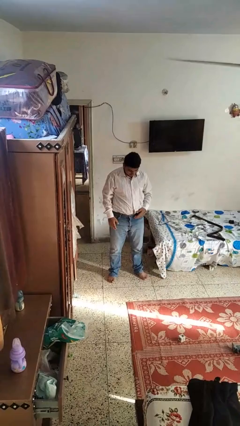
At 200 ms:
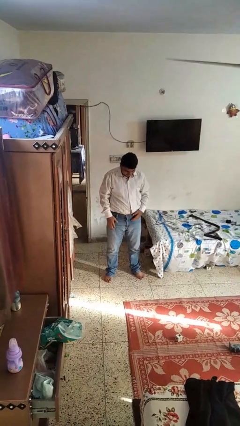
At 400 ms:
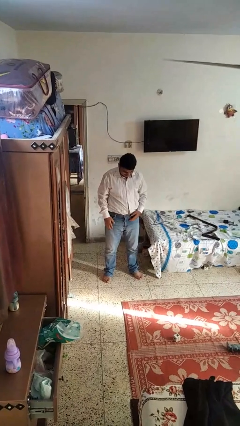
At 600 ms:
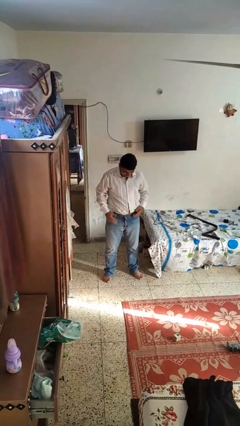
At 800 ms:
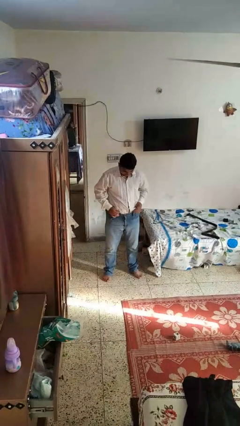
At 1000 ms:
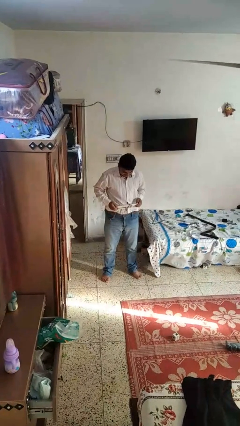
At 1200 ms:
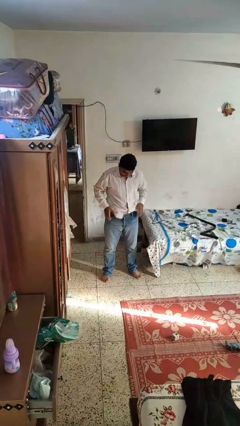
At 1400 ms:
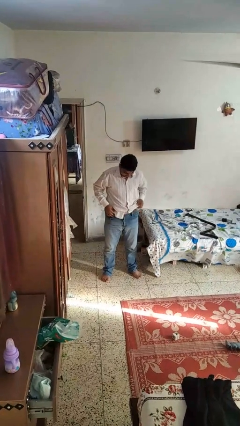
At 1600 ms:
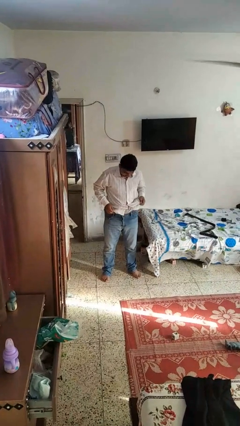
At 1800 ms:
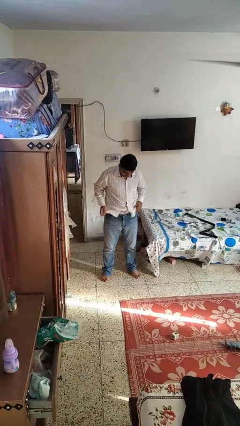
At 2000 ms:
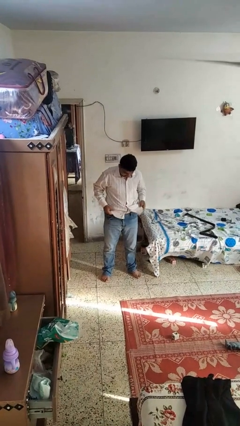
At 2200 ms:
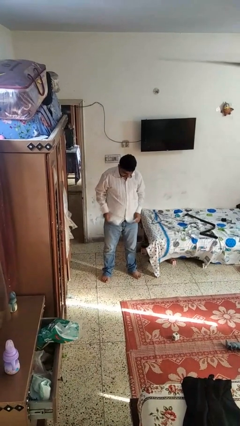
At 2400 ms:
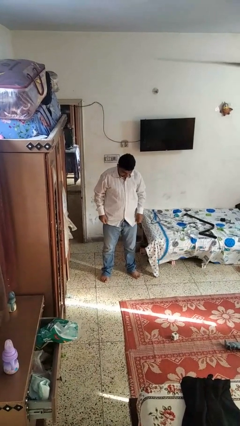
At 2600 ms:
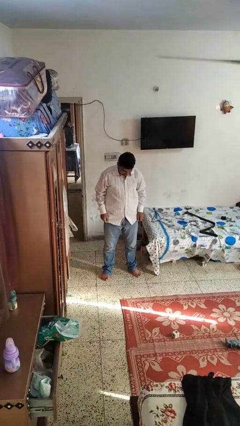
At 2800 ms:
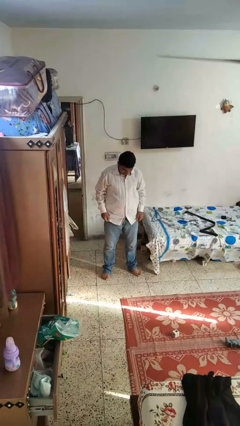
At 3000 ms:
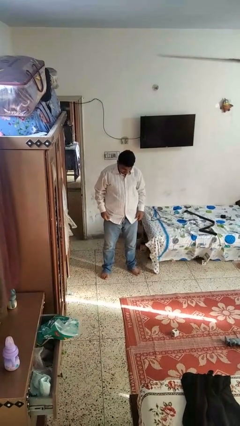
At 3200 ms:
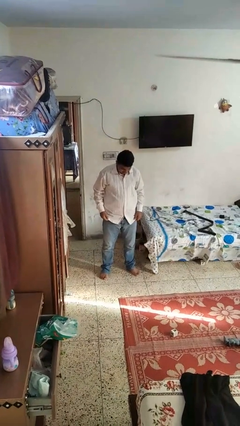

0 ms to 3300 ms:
person untucks shirt

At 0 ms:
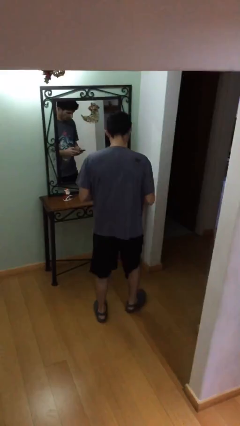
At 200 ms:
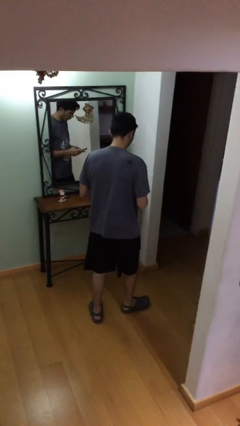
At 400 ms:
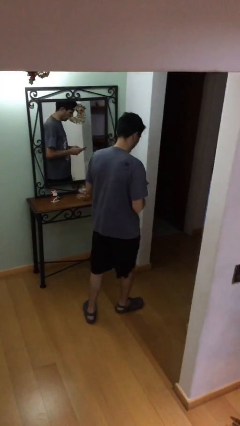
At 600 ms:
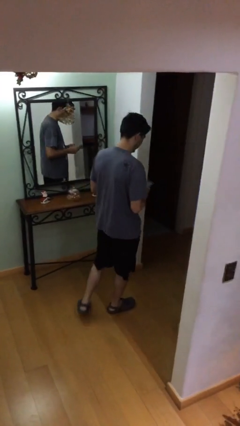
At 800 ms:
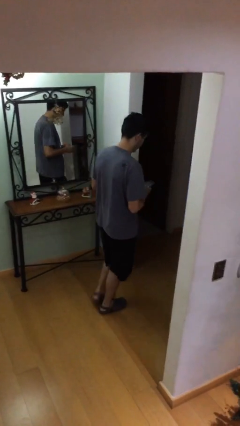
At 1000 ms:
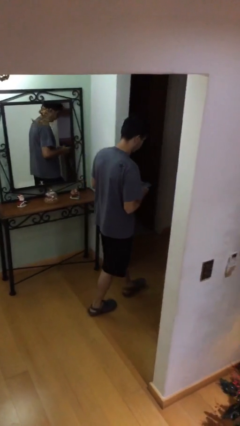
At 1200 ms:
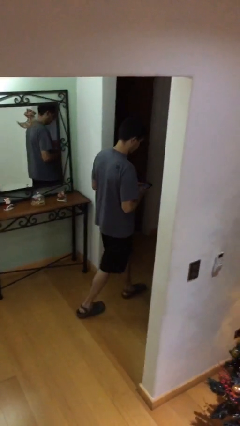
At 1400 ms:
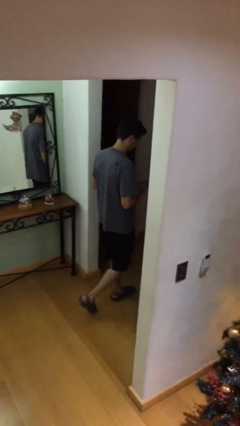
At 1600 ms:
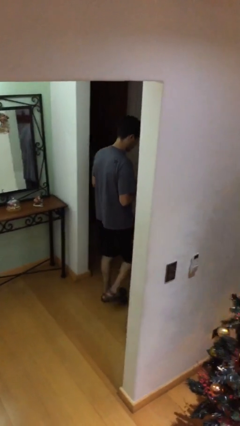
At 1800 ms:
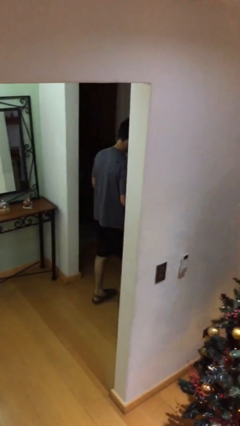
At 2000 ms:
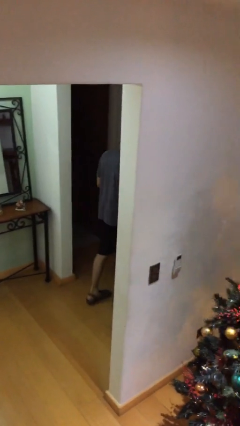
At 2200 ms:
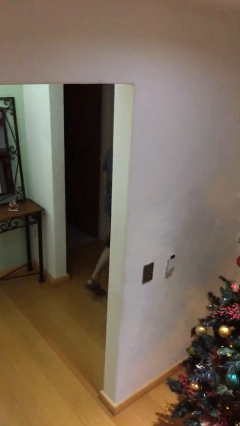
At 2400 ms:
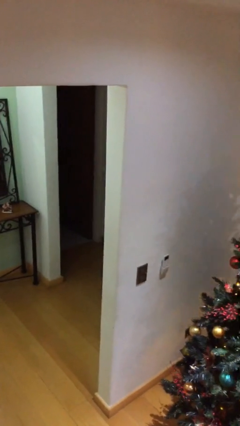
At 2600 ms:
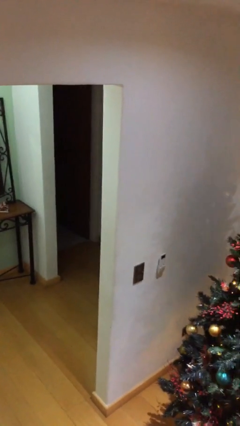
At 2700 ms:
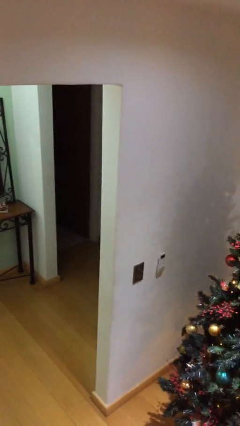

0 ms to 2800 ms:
person exits scene through structure

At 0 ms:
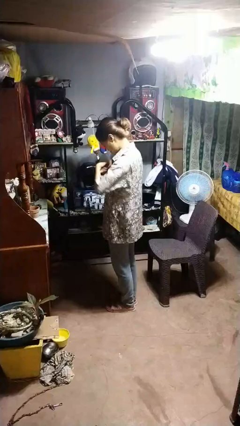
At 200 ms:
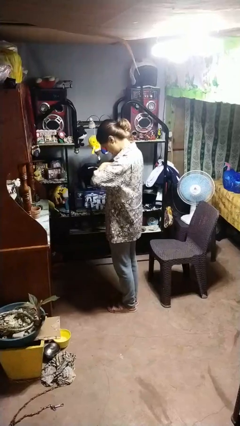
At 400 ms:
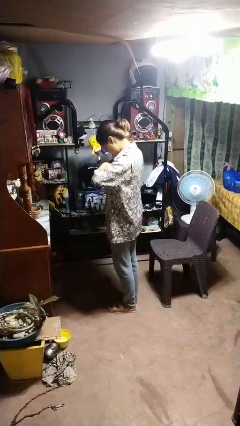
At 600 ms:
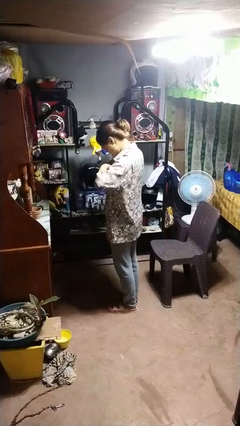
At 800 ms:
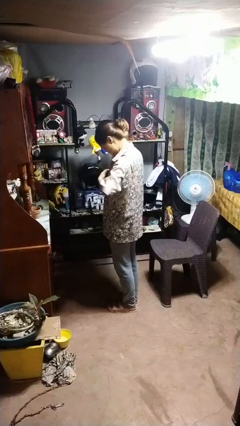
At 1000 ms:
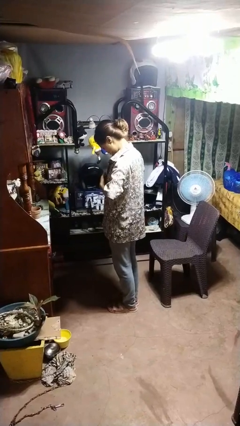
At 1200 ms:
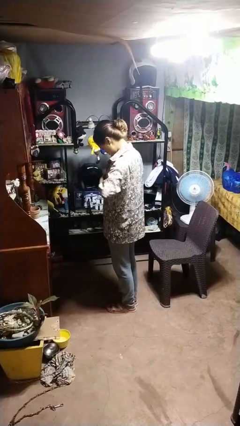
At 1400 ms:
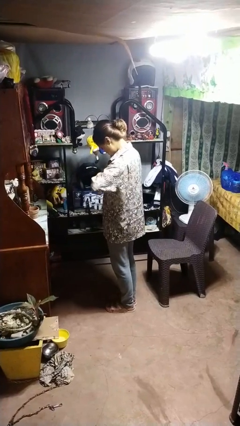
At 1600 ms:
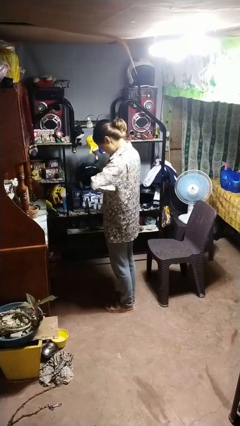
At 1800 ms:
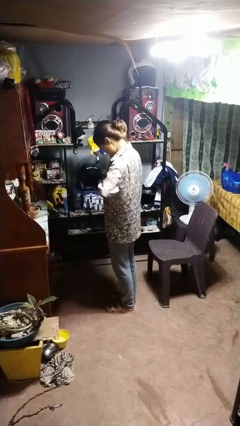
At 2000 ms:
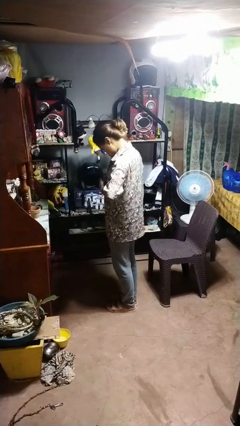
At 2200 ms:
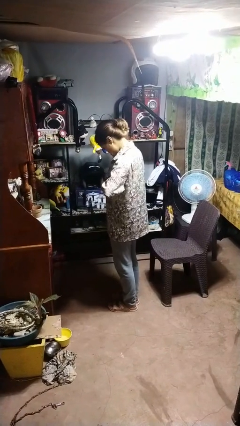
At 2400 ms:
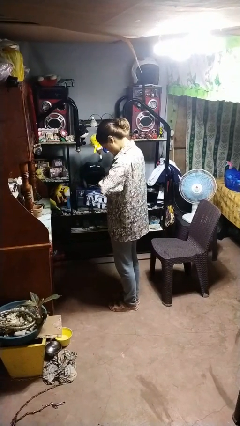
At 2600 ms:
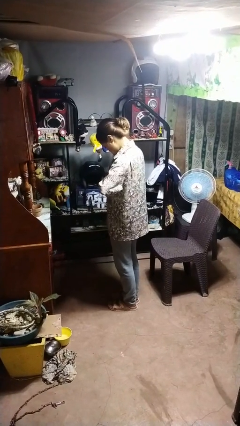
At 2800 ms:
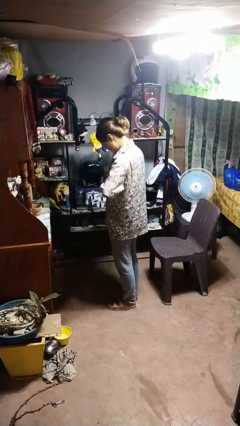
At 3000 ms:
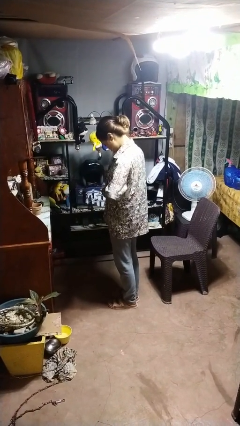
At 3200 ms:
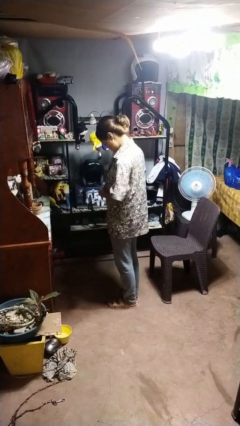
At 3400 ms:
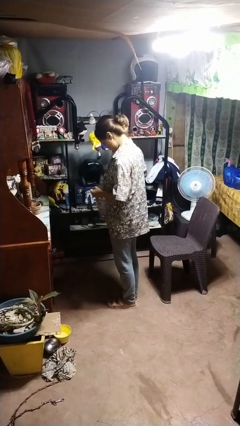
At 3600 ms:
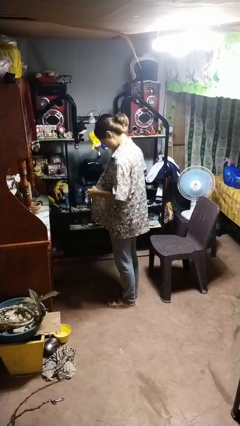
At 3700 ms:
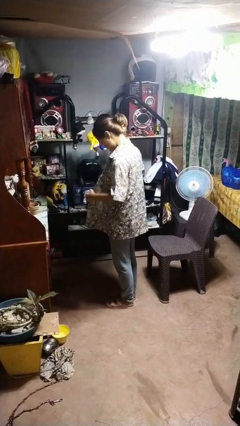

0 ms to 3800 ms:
person unbuttons shirt

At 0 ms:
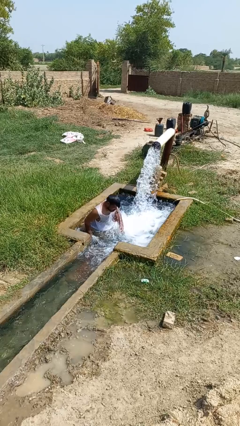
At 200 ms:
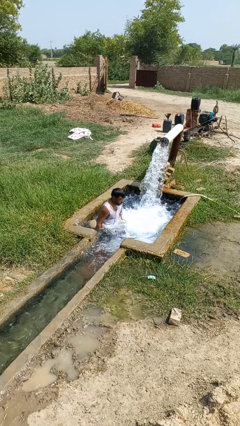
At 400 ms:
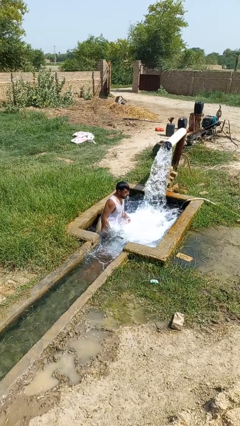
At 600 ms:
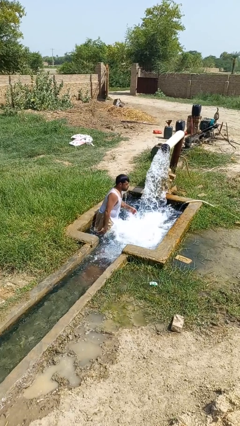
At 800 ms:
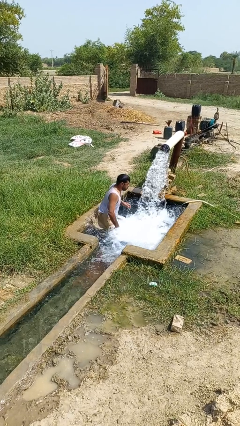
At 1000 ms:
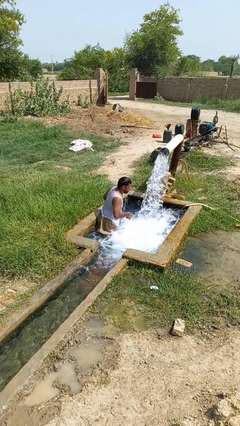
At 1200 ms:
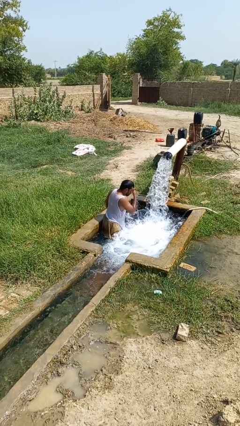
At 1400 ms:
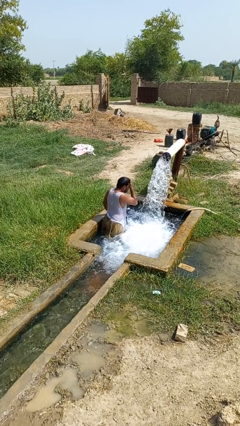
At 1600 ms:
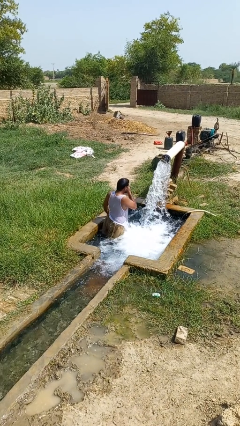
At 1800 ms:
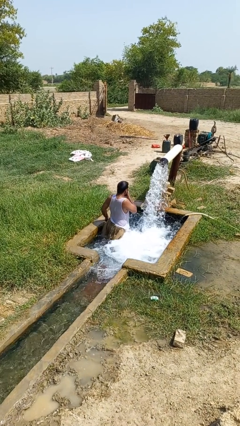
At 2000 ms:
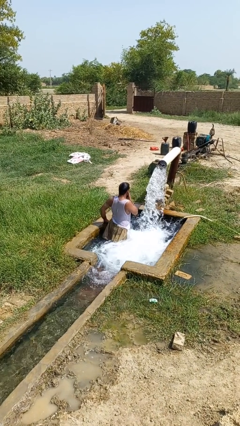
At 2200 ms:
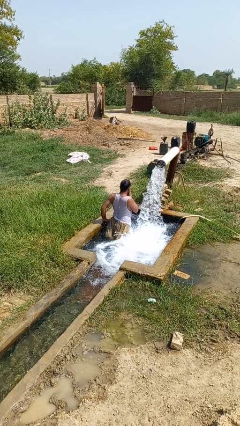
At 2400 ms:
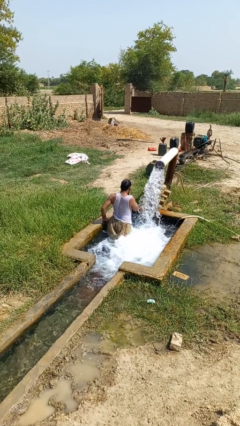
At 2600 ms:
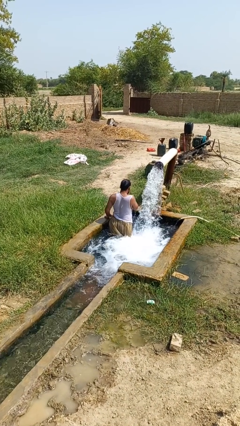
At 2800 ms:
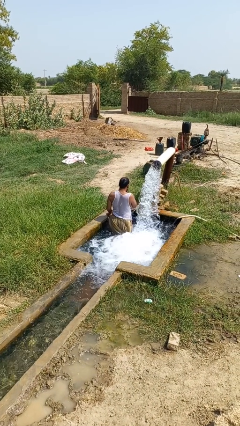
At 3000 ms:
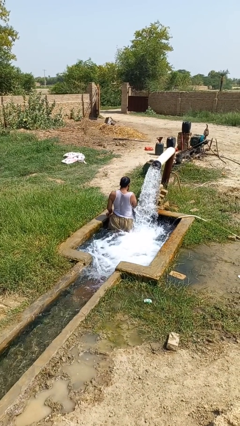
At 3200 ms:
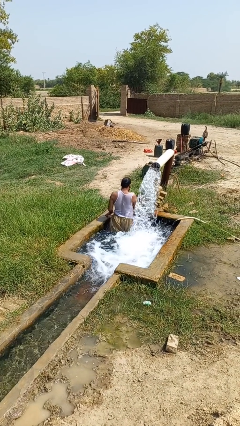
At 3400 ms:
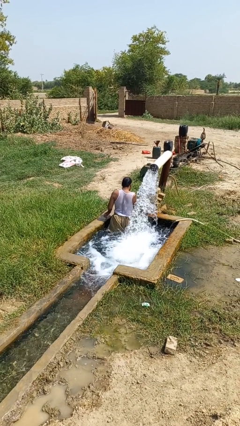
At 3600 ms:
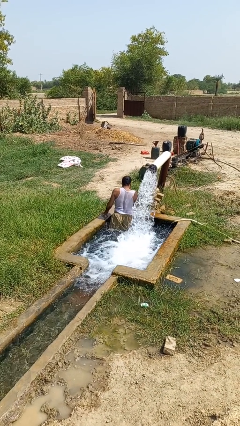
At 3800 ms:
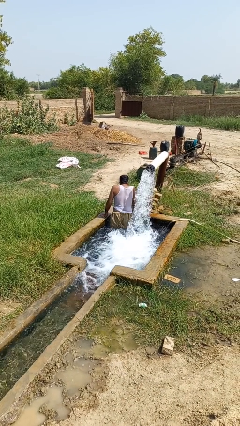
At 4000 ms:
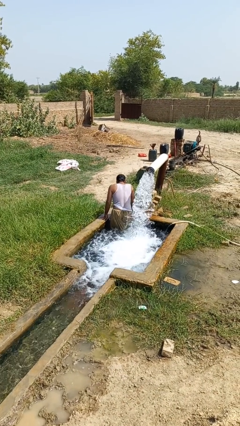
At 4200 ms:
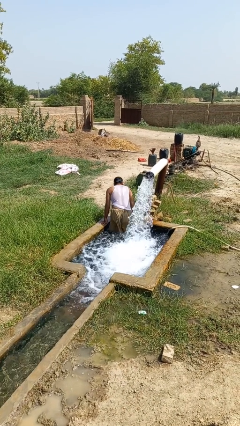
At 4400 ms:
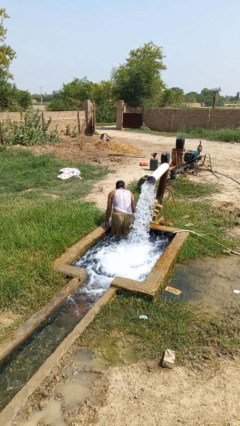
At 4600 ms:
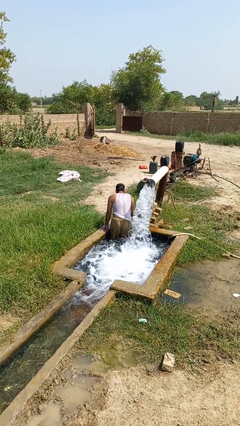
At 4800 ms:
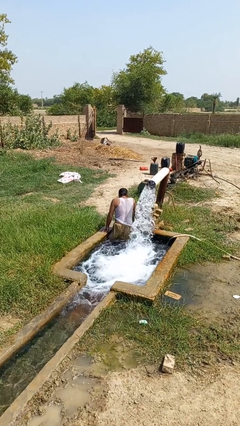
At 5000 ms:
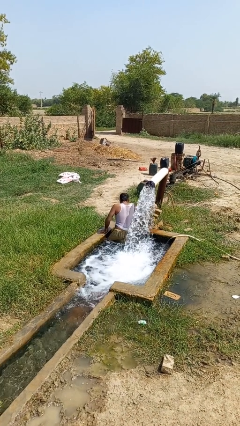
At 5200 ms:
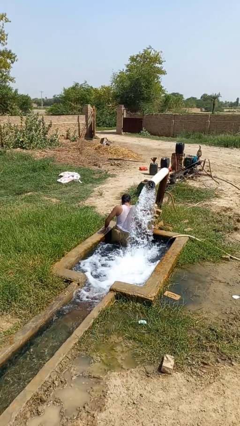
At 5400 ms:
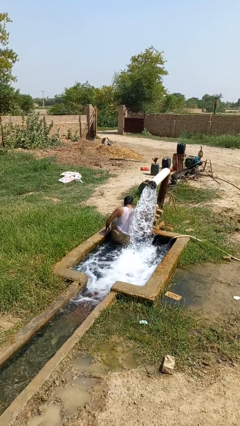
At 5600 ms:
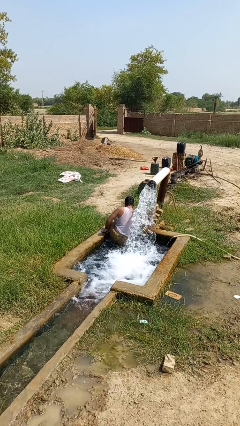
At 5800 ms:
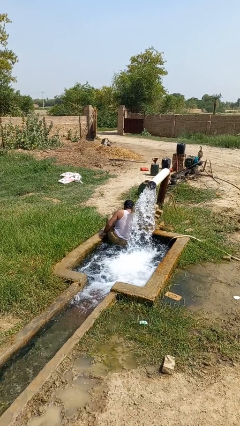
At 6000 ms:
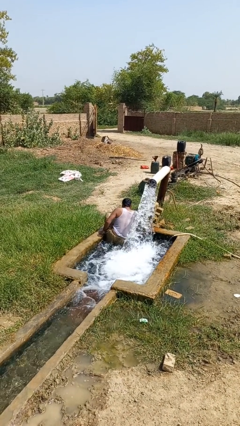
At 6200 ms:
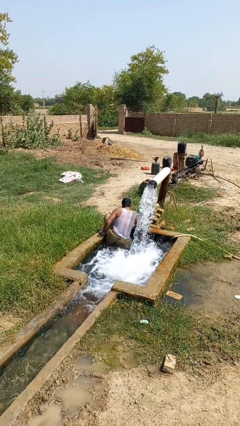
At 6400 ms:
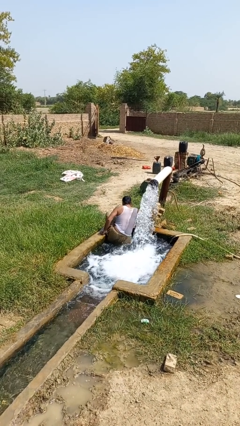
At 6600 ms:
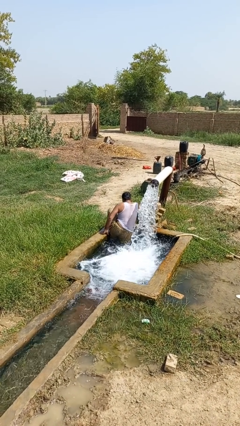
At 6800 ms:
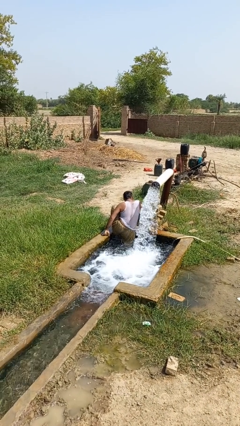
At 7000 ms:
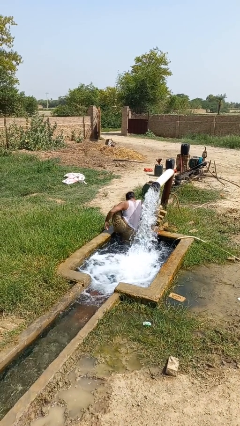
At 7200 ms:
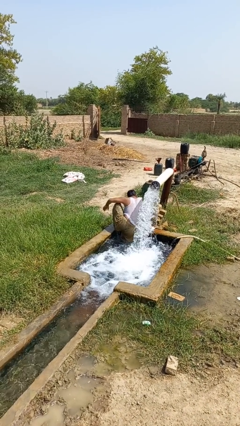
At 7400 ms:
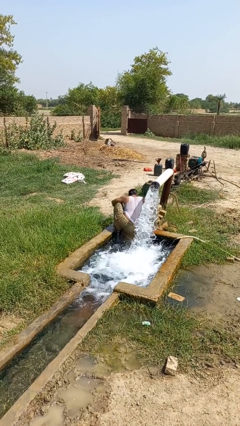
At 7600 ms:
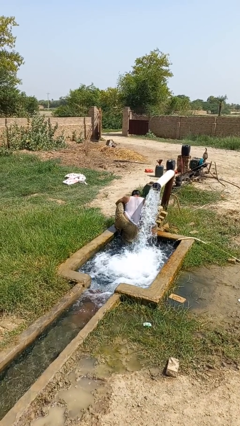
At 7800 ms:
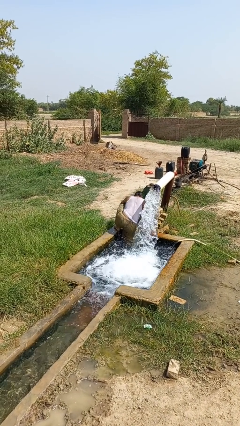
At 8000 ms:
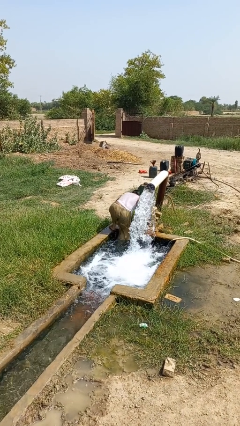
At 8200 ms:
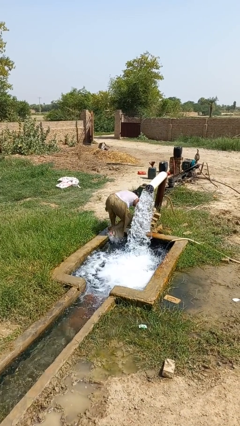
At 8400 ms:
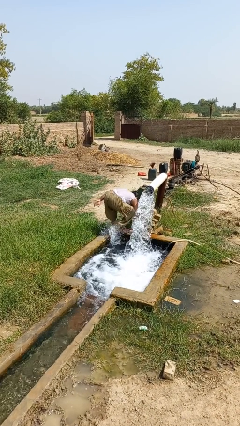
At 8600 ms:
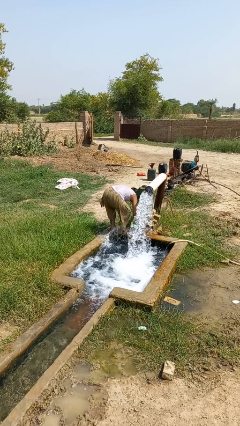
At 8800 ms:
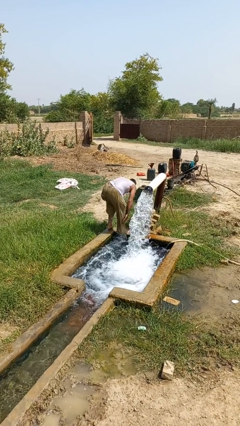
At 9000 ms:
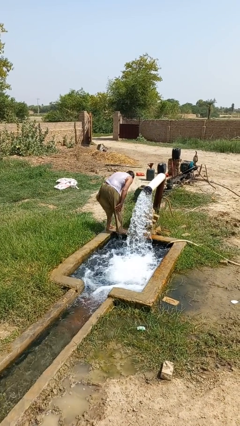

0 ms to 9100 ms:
person exits pool
